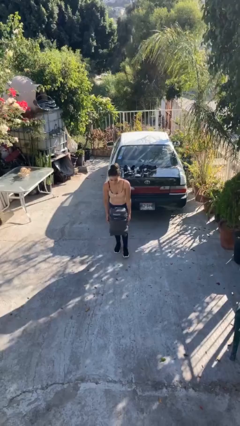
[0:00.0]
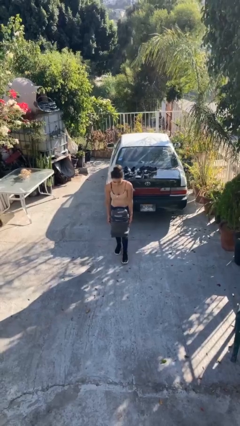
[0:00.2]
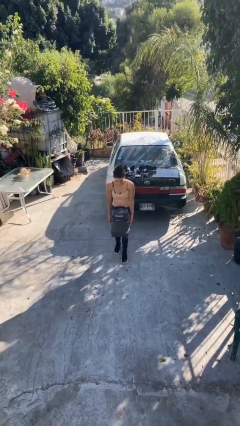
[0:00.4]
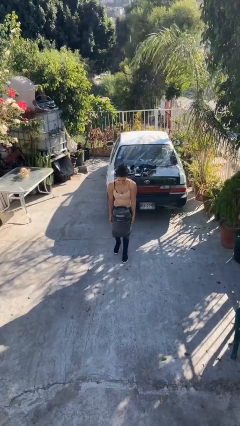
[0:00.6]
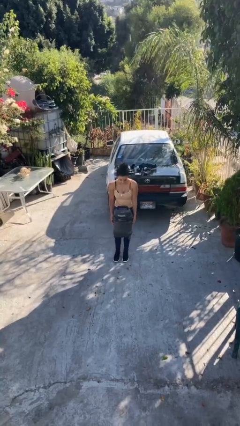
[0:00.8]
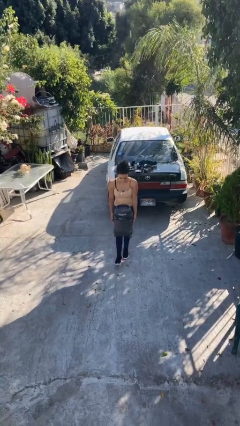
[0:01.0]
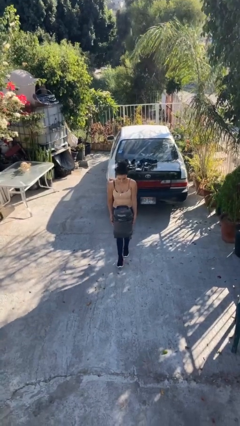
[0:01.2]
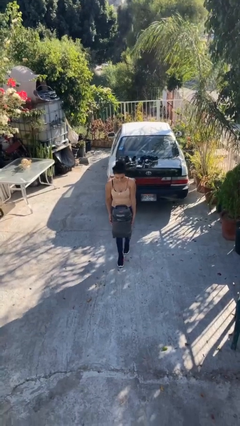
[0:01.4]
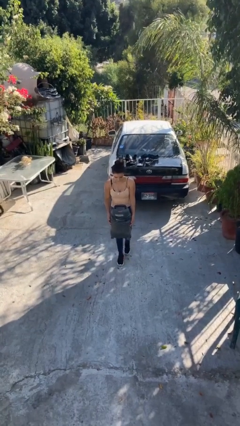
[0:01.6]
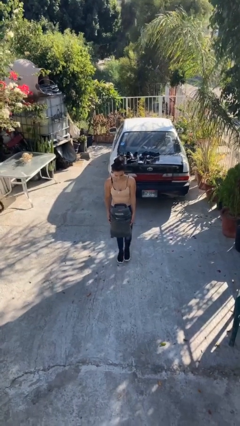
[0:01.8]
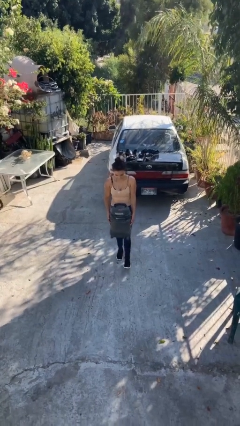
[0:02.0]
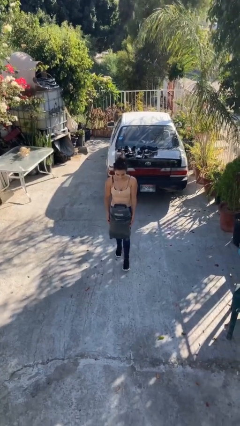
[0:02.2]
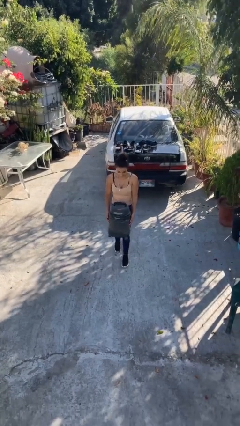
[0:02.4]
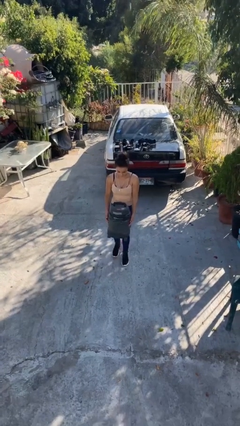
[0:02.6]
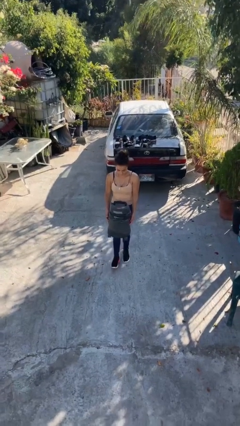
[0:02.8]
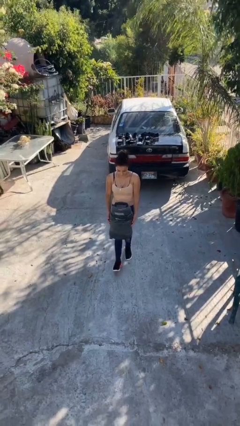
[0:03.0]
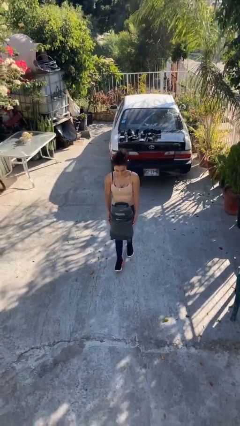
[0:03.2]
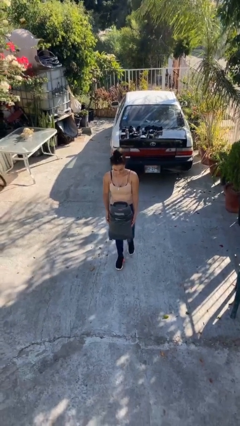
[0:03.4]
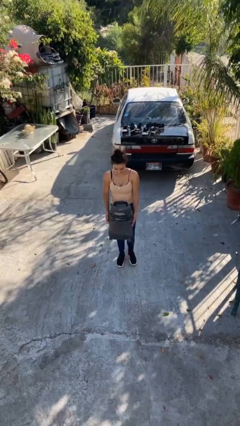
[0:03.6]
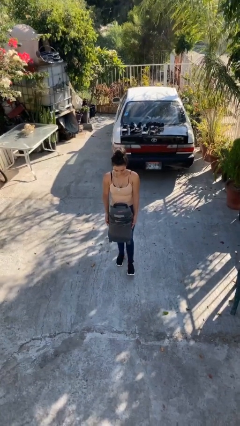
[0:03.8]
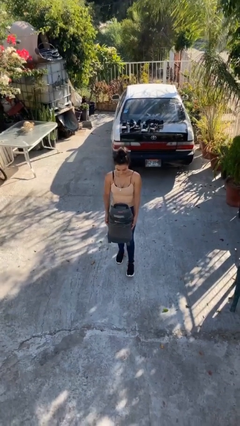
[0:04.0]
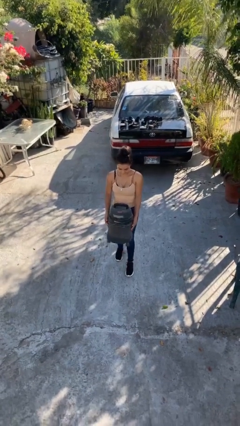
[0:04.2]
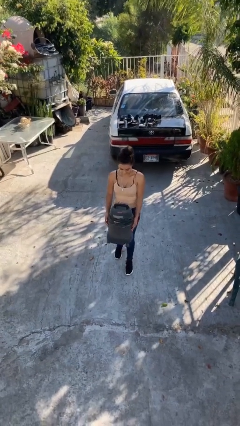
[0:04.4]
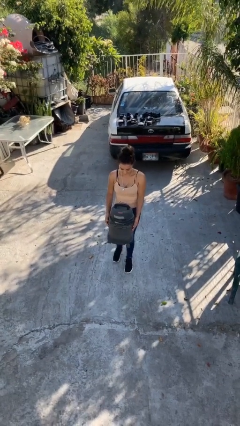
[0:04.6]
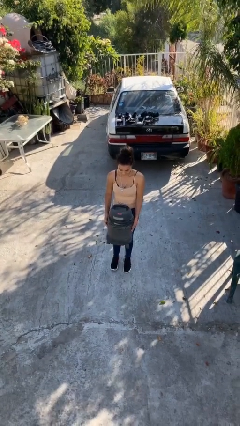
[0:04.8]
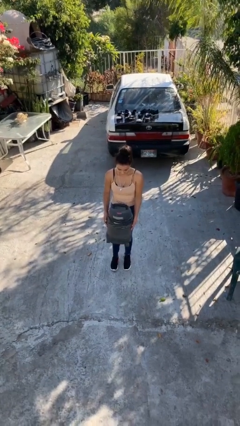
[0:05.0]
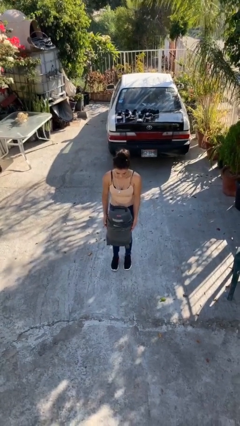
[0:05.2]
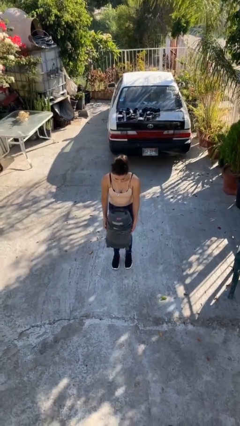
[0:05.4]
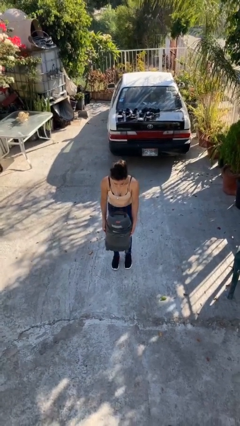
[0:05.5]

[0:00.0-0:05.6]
person carries heavy object

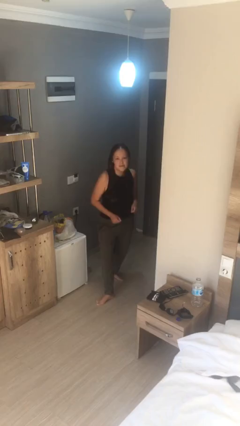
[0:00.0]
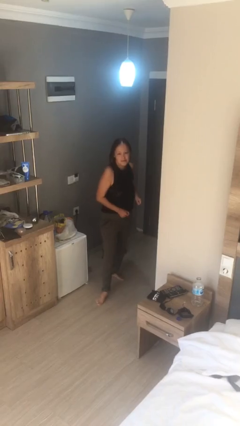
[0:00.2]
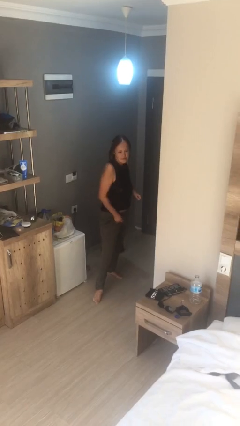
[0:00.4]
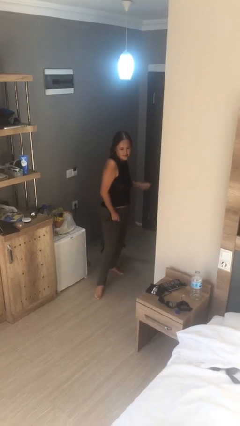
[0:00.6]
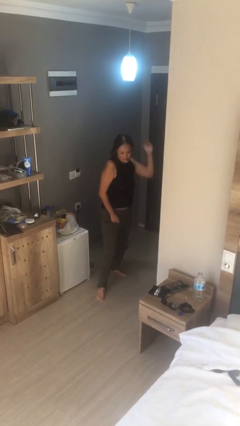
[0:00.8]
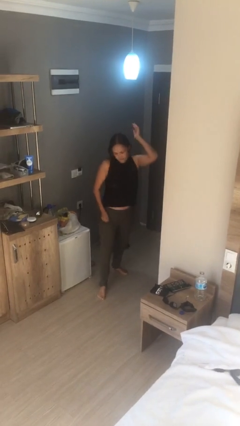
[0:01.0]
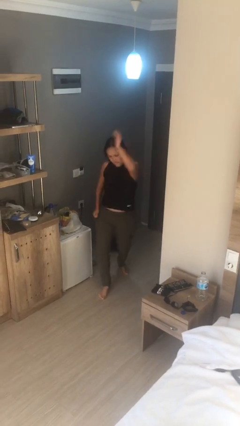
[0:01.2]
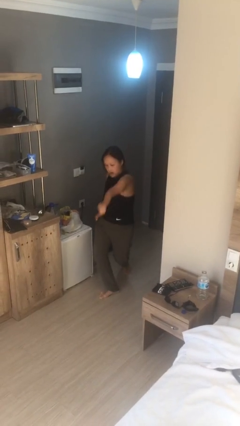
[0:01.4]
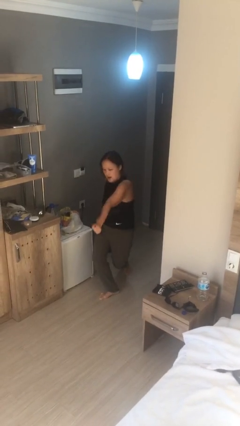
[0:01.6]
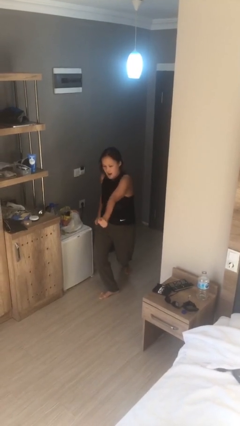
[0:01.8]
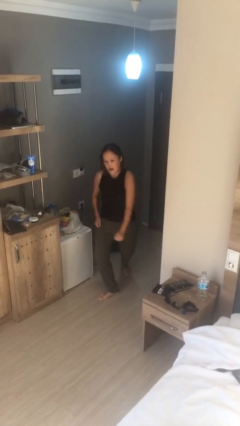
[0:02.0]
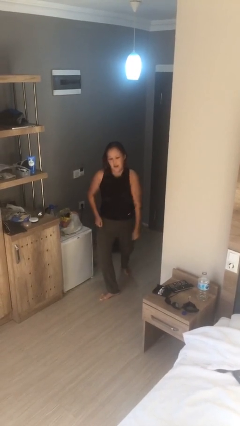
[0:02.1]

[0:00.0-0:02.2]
person karate chop

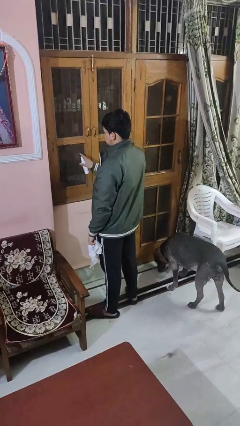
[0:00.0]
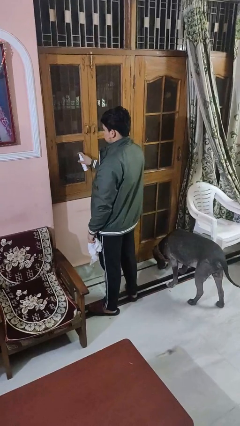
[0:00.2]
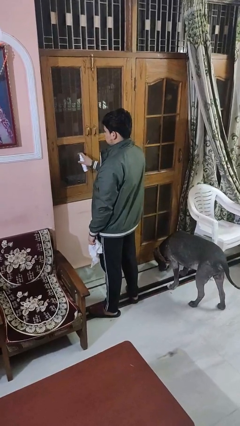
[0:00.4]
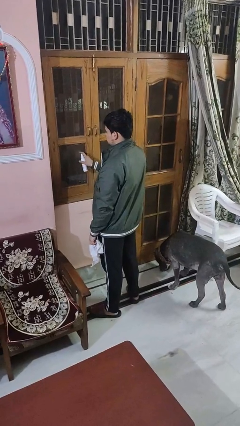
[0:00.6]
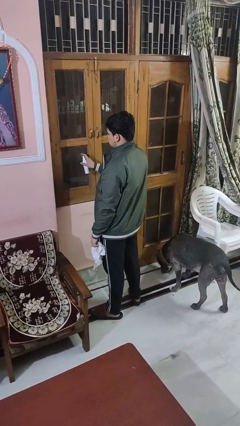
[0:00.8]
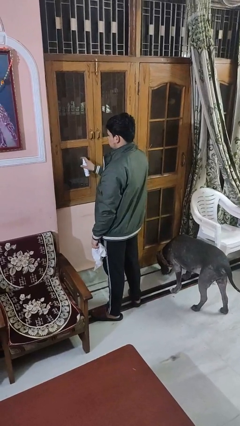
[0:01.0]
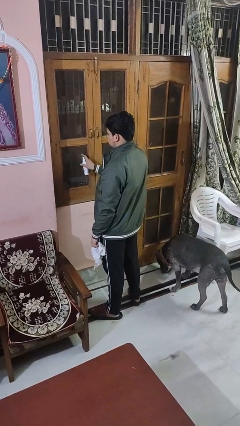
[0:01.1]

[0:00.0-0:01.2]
person sprays from bottle

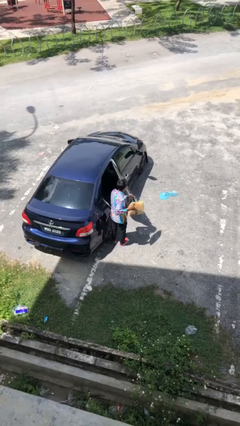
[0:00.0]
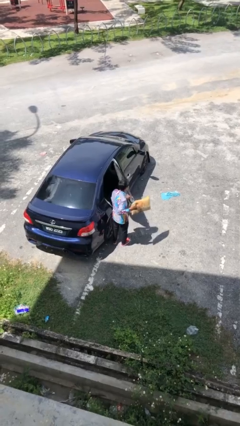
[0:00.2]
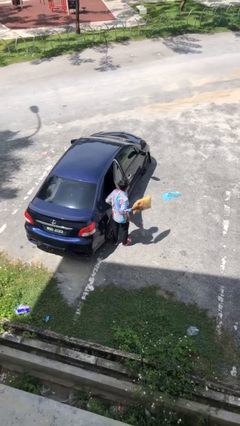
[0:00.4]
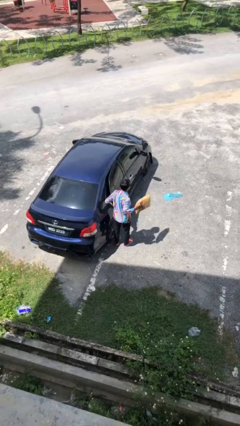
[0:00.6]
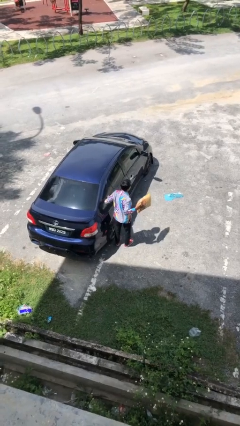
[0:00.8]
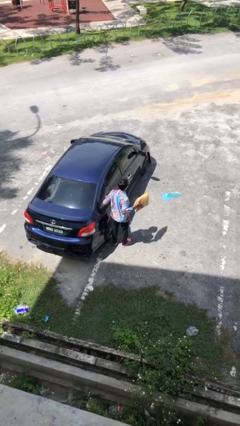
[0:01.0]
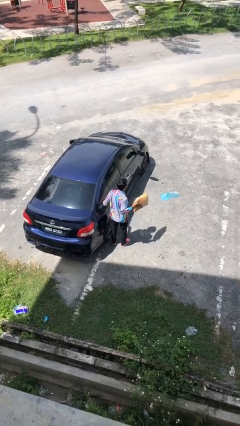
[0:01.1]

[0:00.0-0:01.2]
person closes car door

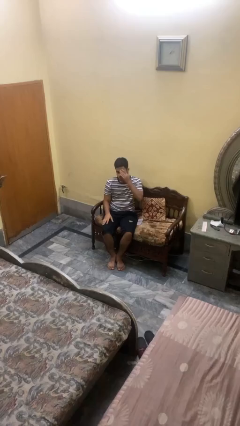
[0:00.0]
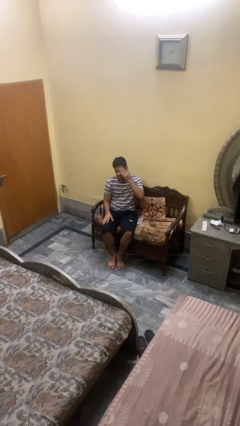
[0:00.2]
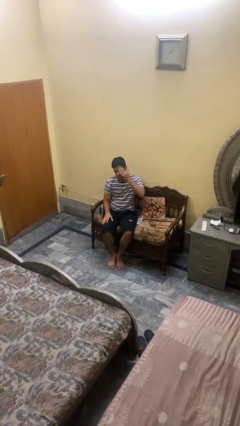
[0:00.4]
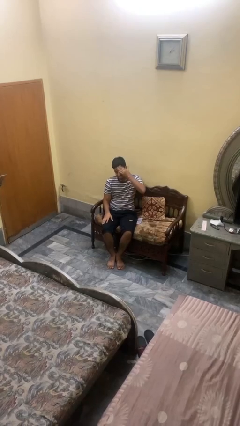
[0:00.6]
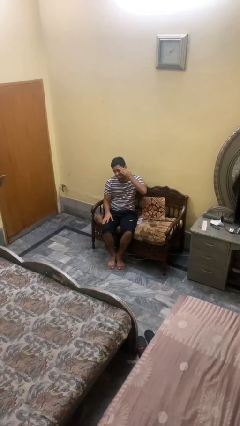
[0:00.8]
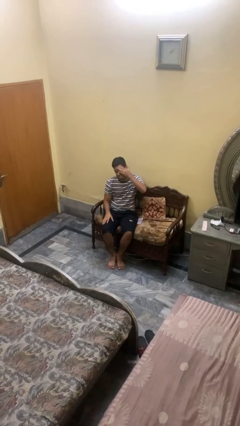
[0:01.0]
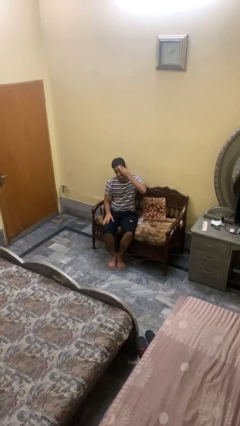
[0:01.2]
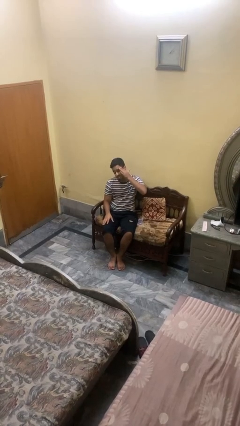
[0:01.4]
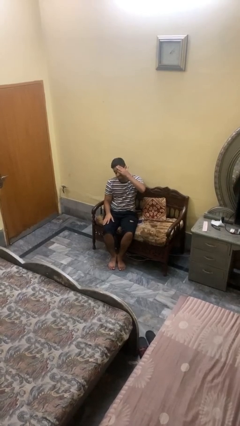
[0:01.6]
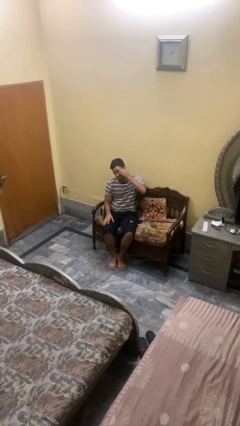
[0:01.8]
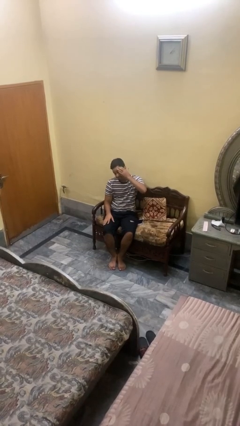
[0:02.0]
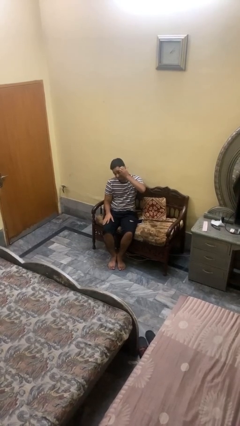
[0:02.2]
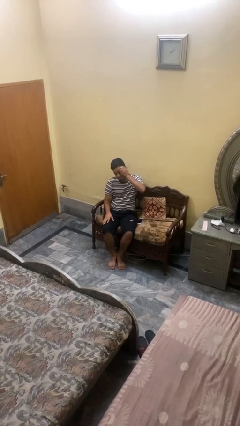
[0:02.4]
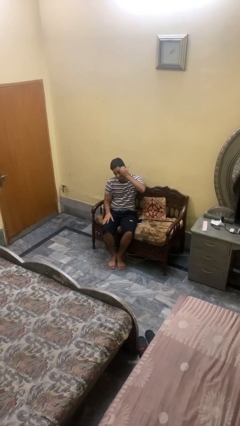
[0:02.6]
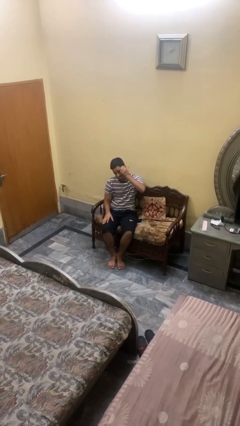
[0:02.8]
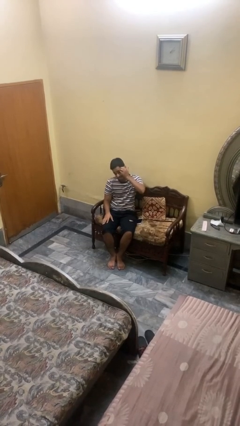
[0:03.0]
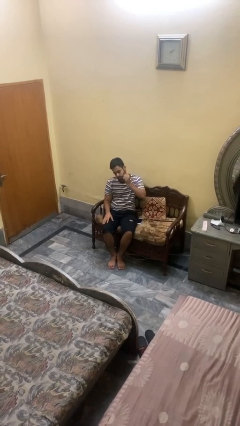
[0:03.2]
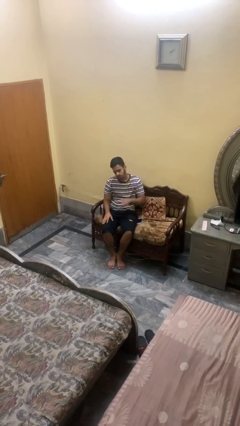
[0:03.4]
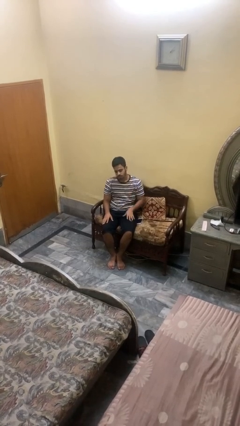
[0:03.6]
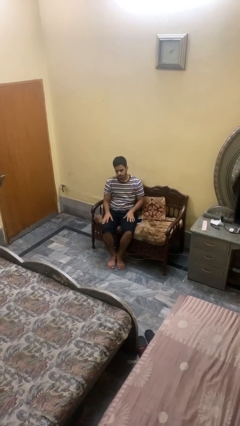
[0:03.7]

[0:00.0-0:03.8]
person scratches face

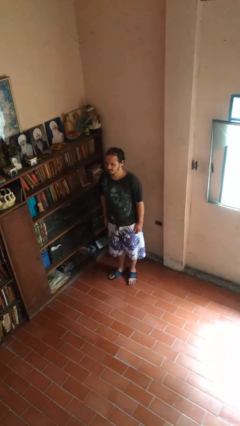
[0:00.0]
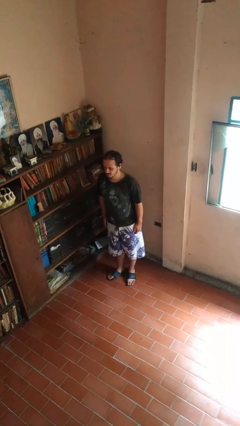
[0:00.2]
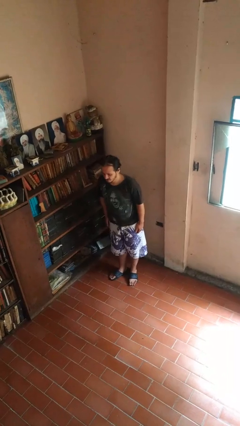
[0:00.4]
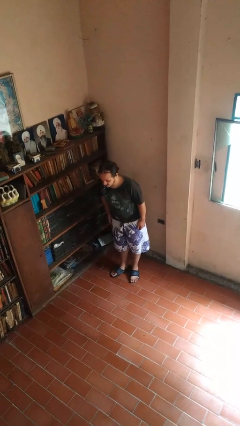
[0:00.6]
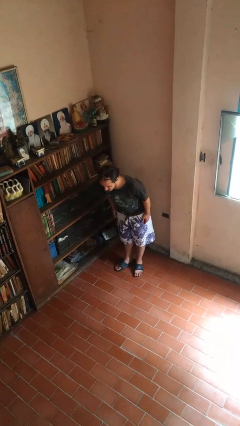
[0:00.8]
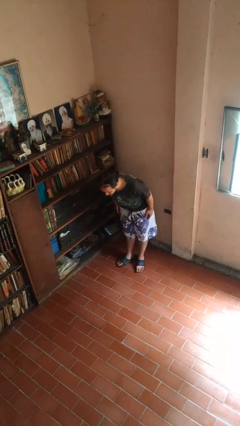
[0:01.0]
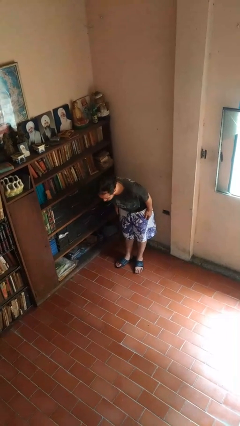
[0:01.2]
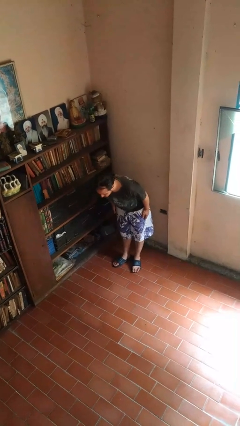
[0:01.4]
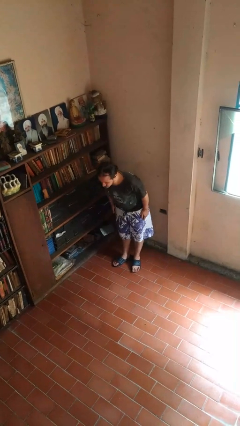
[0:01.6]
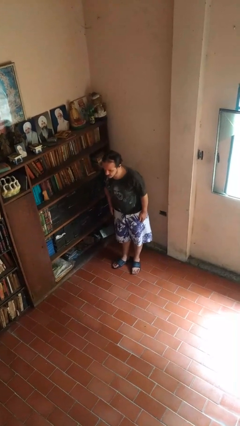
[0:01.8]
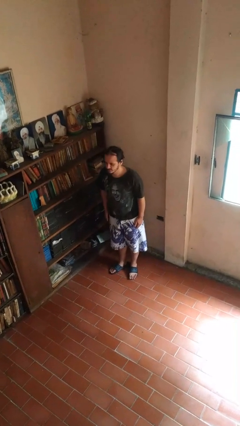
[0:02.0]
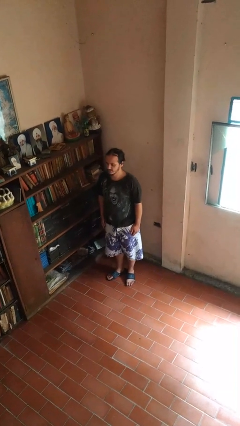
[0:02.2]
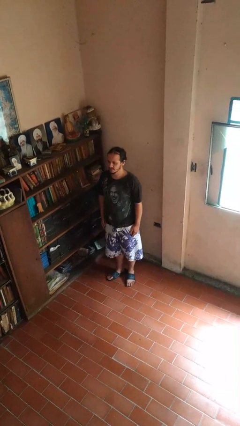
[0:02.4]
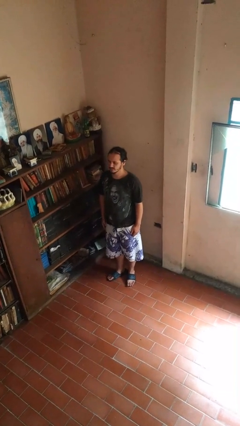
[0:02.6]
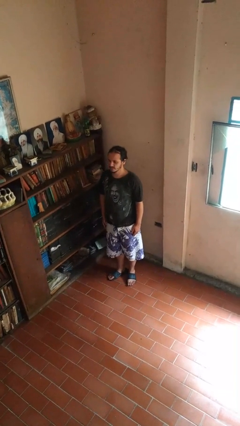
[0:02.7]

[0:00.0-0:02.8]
person bows

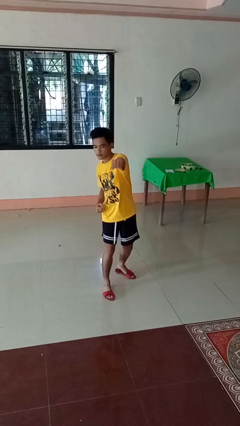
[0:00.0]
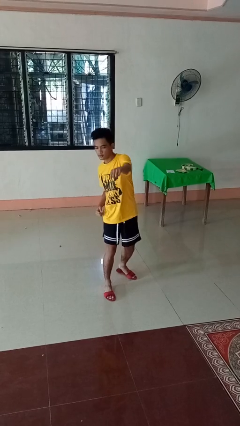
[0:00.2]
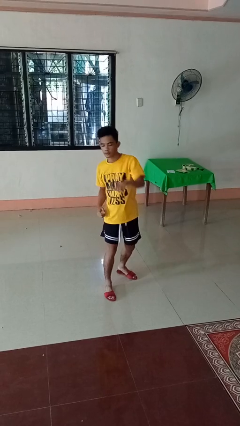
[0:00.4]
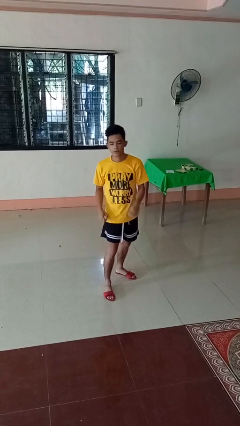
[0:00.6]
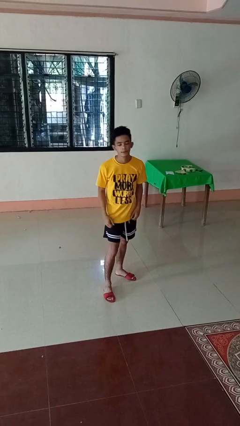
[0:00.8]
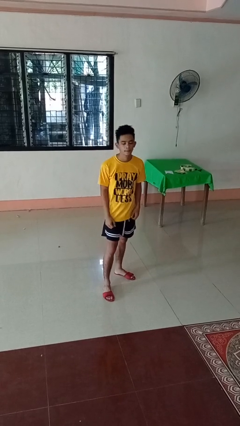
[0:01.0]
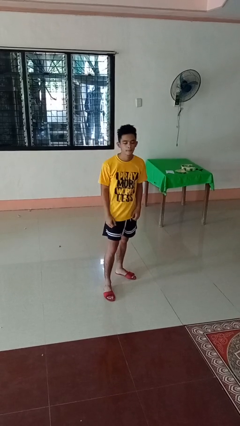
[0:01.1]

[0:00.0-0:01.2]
person punches
